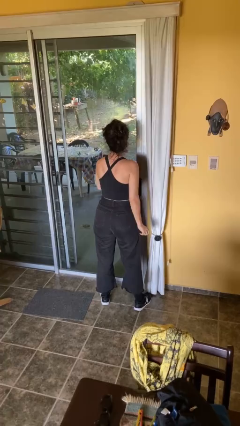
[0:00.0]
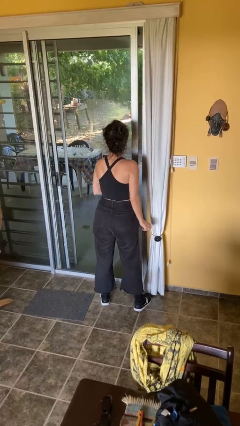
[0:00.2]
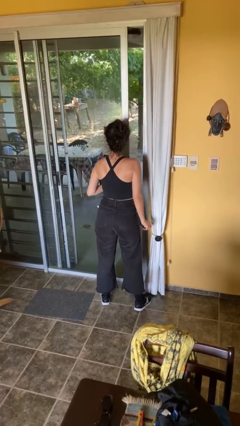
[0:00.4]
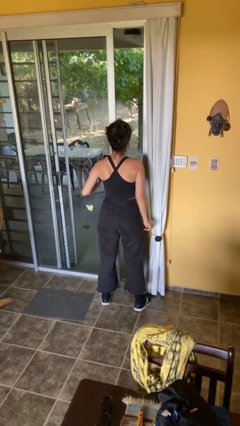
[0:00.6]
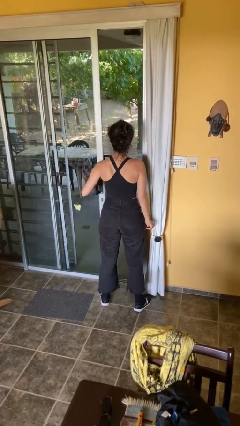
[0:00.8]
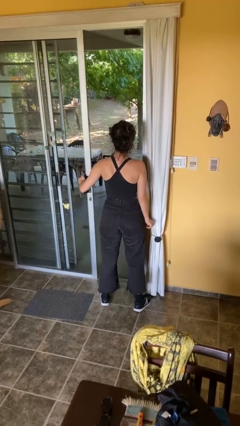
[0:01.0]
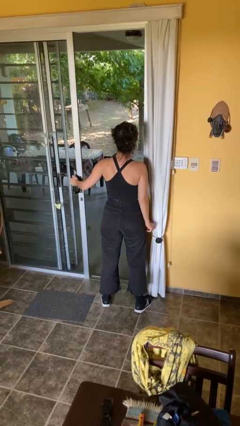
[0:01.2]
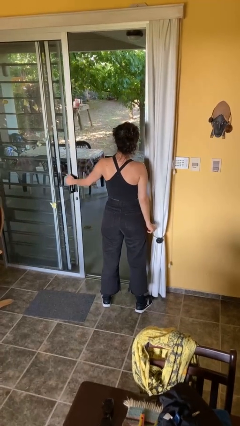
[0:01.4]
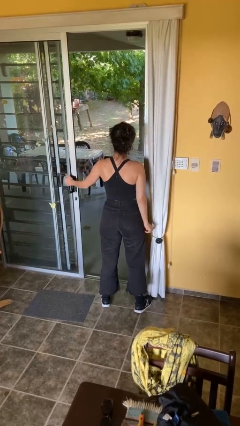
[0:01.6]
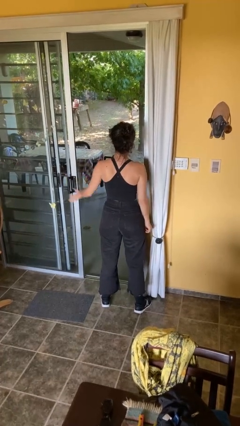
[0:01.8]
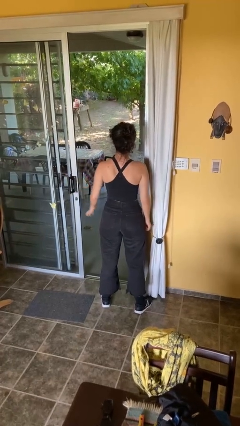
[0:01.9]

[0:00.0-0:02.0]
person opens facility door

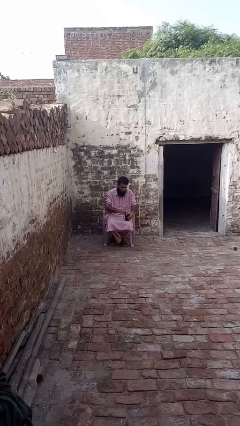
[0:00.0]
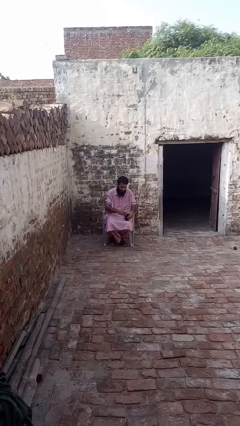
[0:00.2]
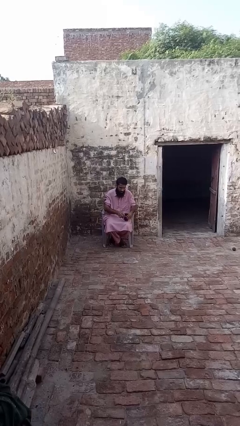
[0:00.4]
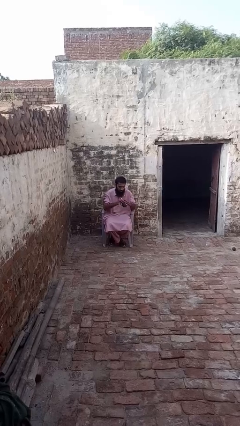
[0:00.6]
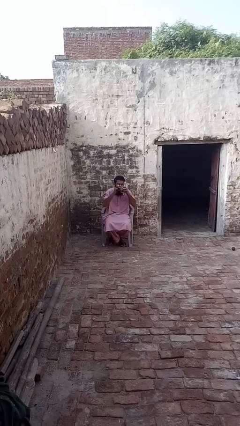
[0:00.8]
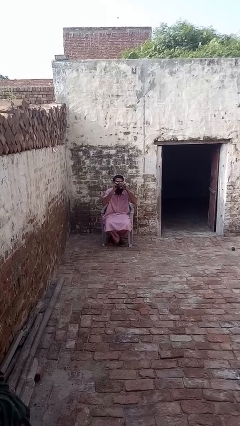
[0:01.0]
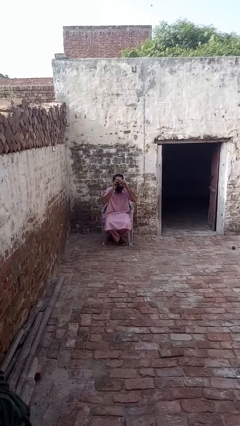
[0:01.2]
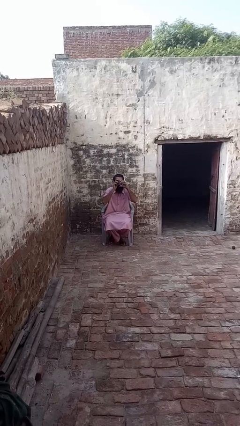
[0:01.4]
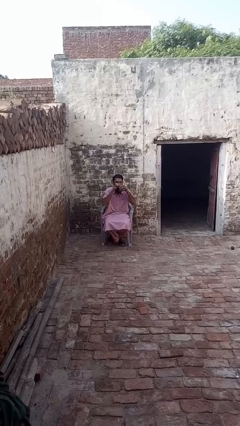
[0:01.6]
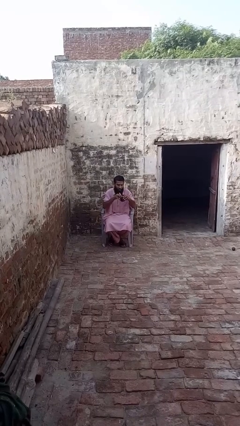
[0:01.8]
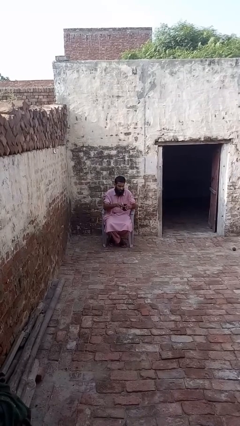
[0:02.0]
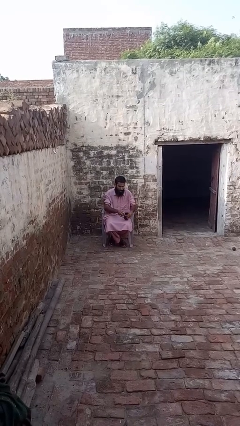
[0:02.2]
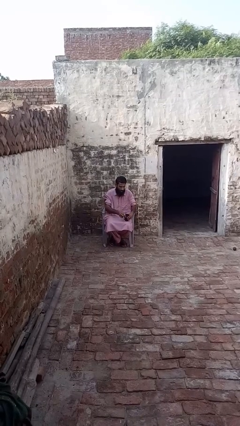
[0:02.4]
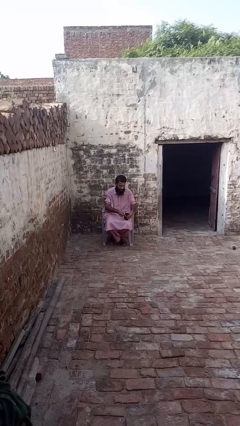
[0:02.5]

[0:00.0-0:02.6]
person drinks from mug

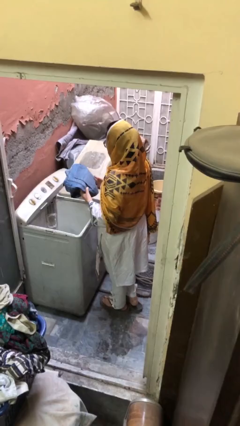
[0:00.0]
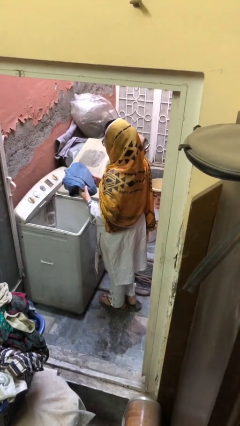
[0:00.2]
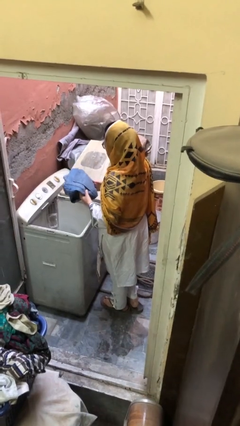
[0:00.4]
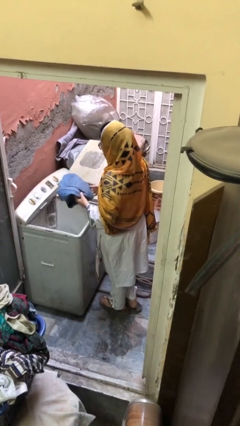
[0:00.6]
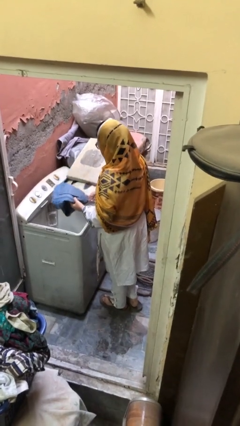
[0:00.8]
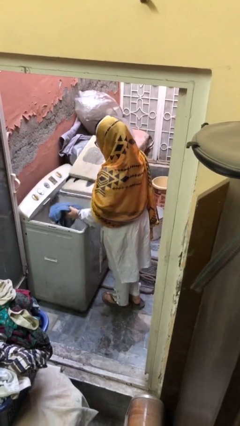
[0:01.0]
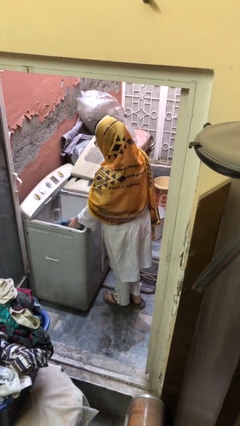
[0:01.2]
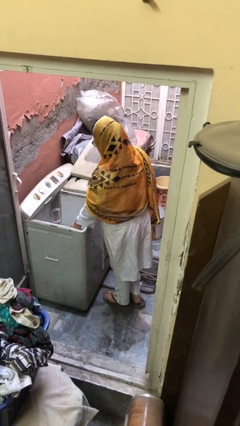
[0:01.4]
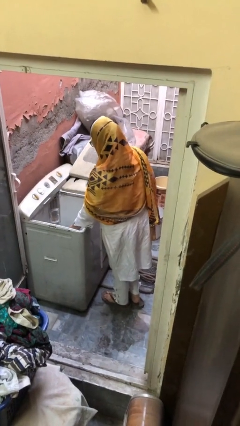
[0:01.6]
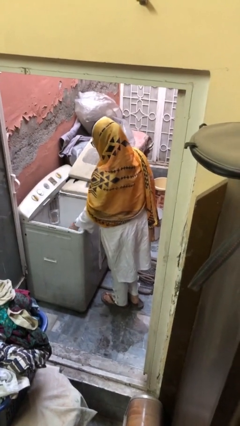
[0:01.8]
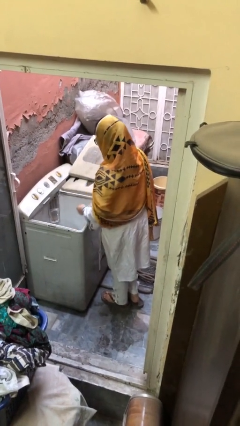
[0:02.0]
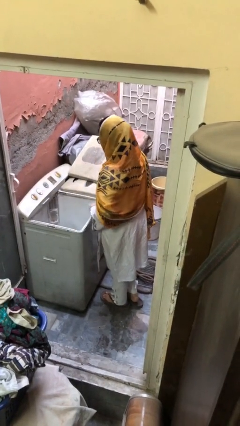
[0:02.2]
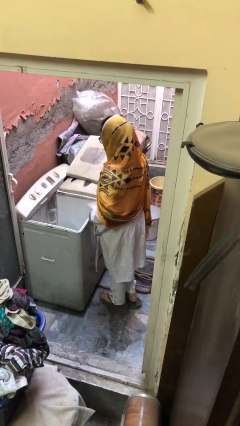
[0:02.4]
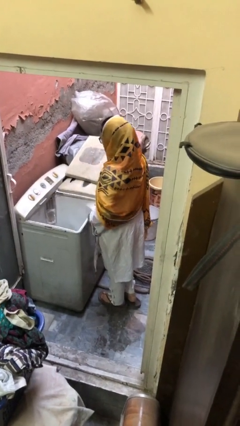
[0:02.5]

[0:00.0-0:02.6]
person loads clotheswasher

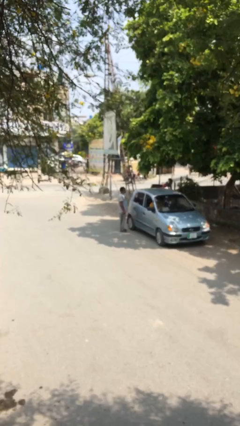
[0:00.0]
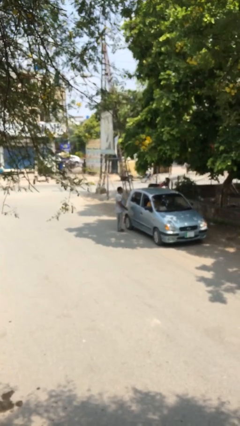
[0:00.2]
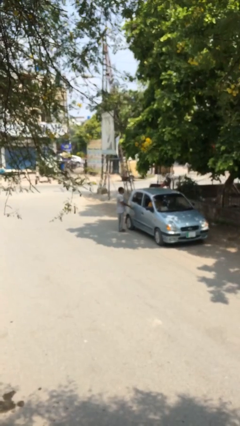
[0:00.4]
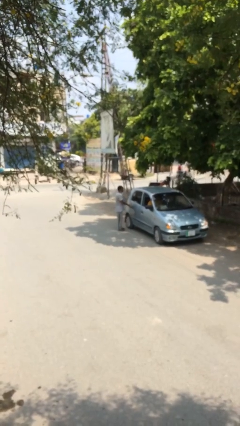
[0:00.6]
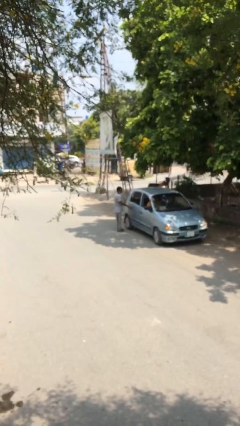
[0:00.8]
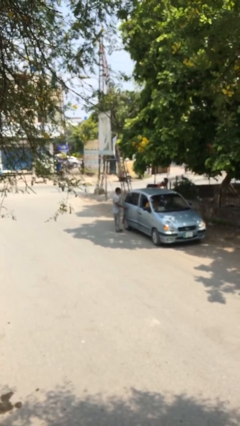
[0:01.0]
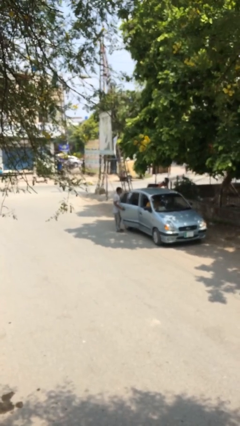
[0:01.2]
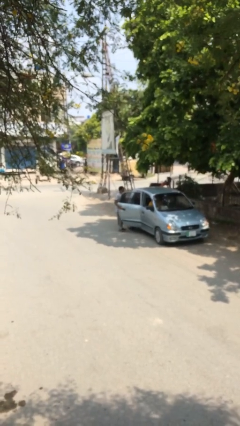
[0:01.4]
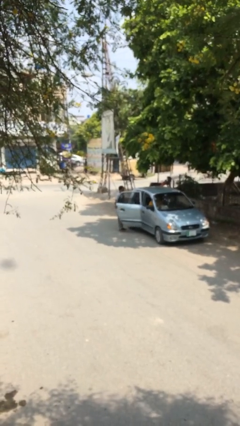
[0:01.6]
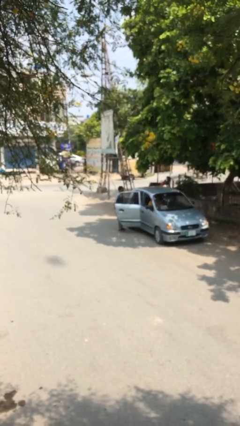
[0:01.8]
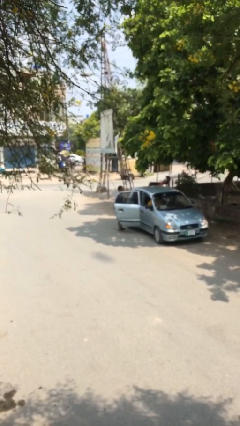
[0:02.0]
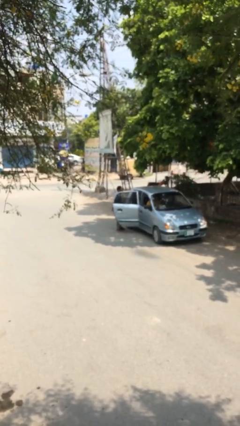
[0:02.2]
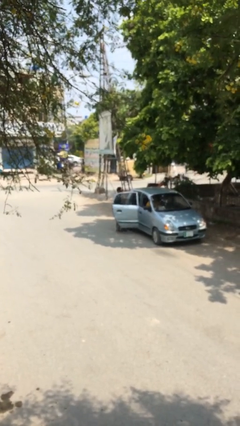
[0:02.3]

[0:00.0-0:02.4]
person opens car door

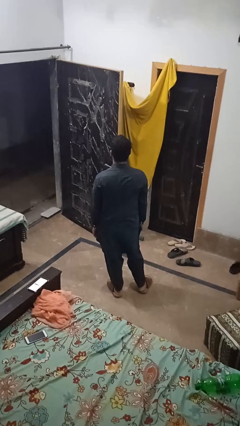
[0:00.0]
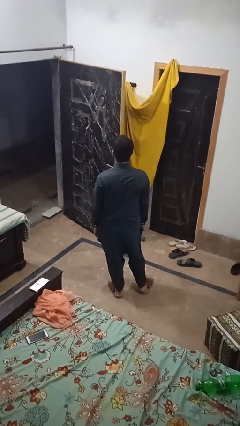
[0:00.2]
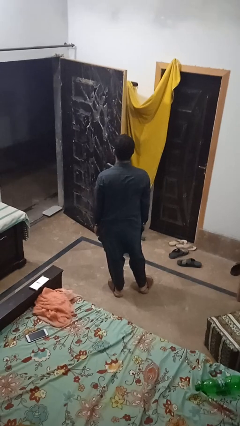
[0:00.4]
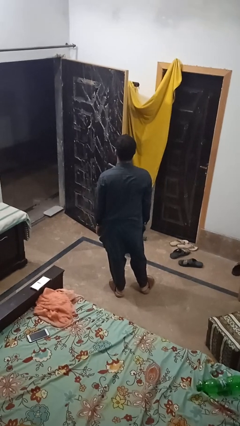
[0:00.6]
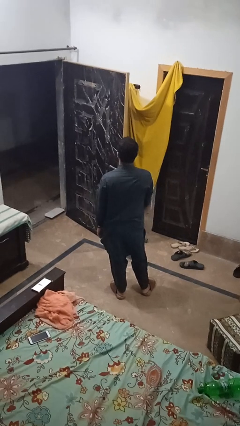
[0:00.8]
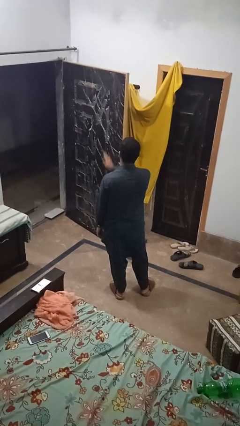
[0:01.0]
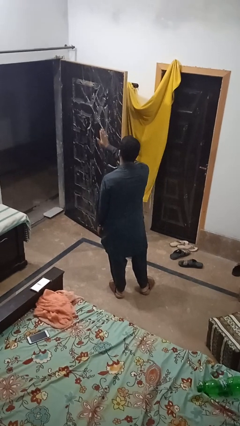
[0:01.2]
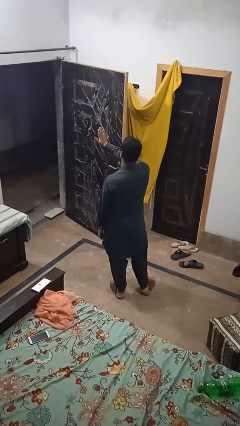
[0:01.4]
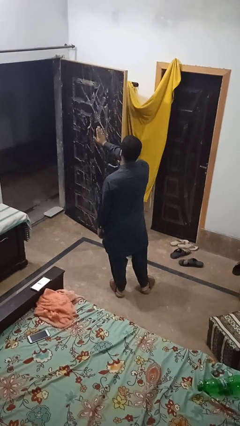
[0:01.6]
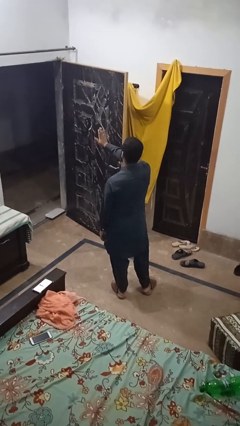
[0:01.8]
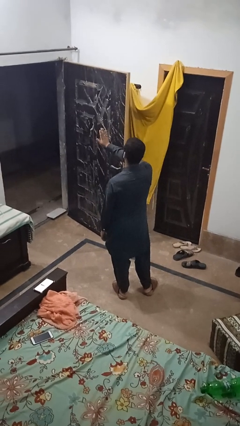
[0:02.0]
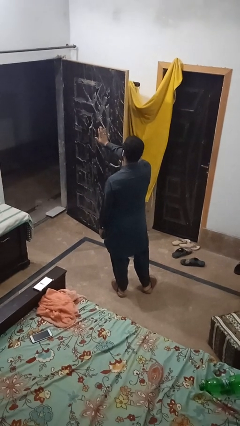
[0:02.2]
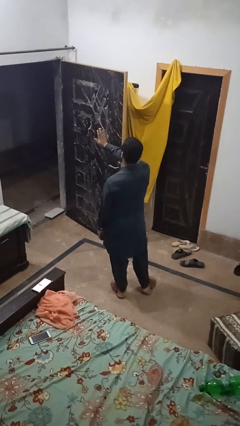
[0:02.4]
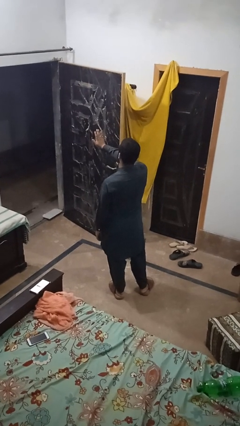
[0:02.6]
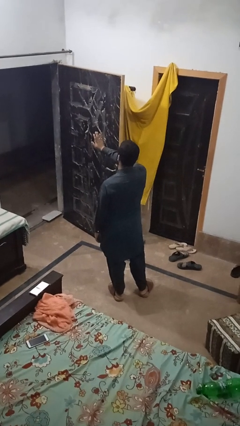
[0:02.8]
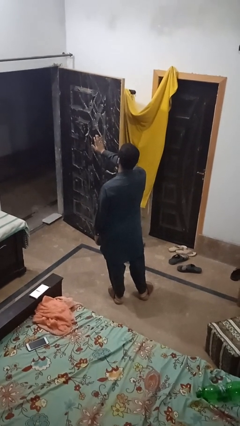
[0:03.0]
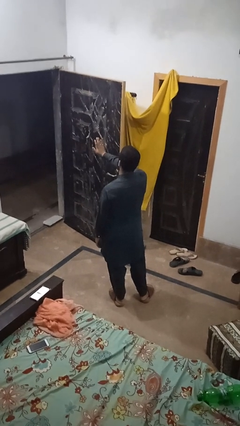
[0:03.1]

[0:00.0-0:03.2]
person gestures stop

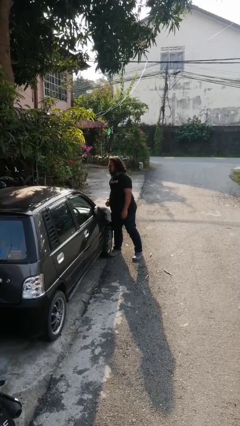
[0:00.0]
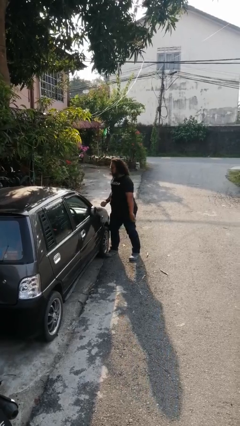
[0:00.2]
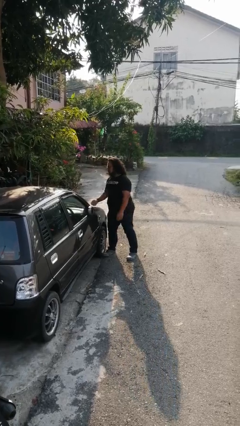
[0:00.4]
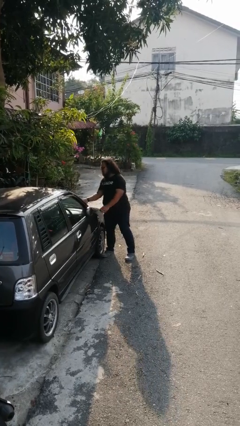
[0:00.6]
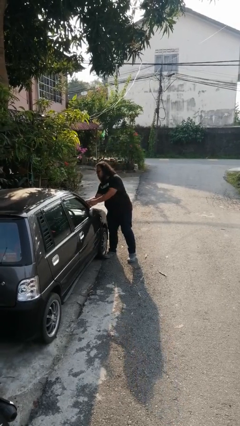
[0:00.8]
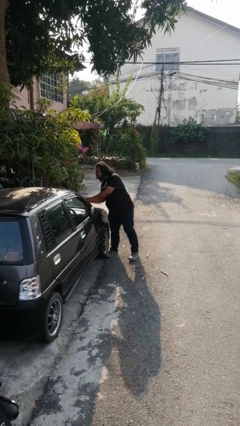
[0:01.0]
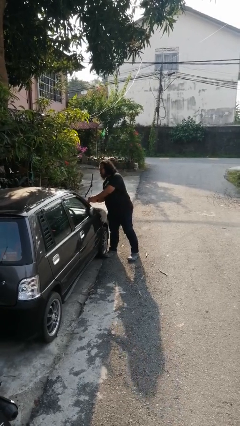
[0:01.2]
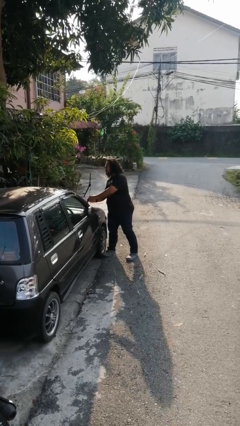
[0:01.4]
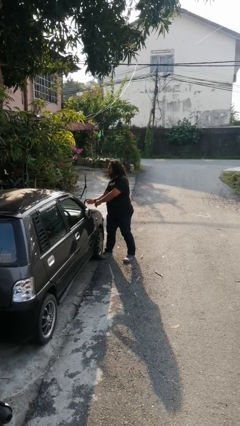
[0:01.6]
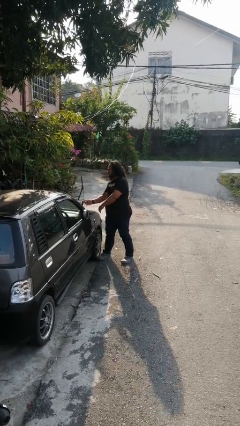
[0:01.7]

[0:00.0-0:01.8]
person flips up car wipers

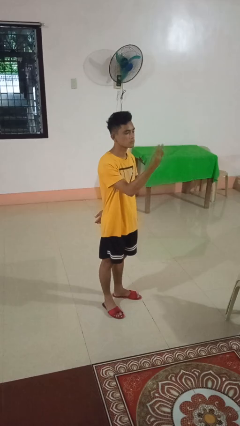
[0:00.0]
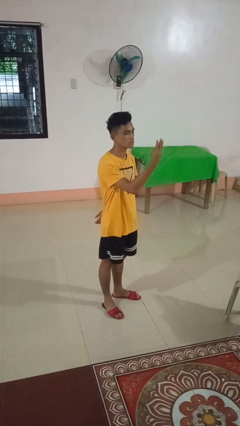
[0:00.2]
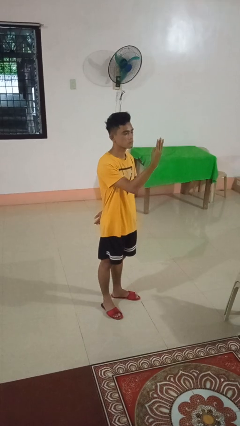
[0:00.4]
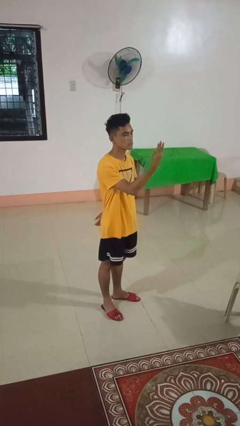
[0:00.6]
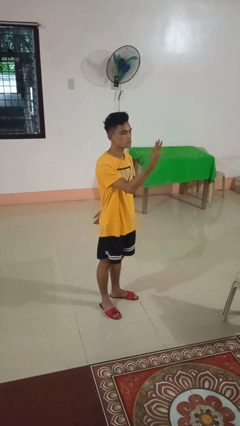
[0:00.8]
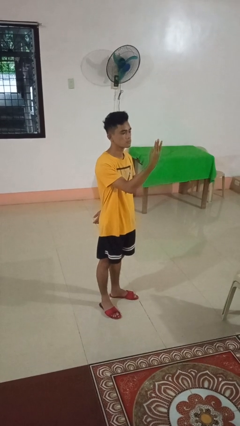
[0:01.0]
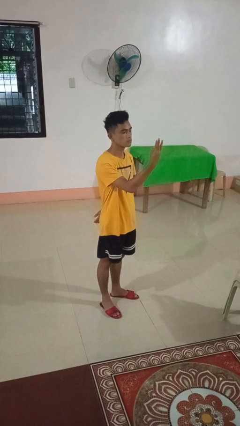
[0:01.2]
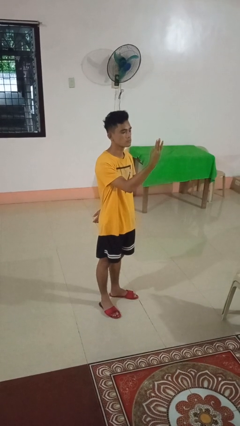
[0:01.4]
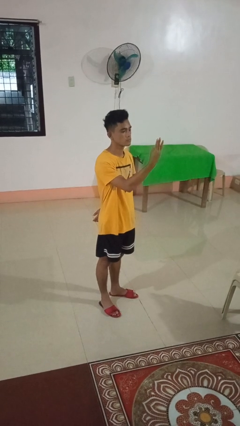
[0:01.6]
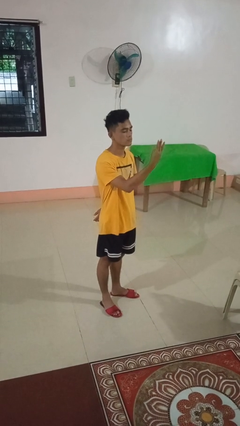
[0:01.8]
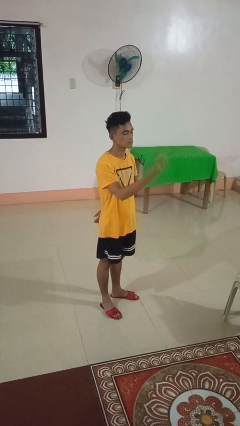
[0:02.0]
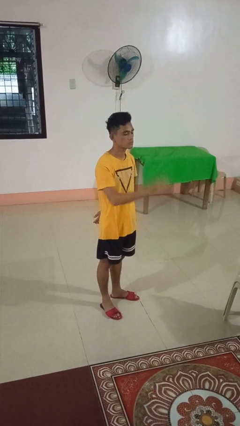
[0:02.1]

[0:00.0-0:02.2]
person gestures number three

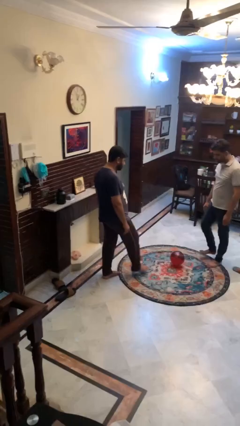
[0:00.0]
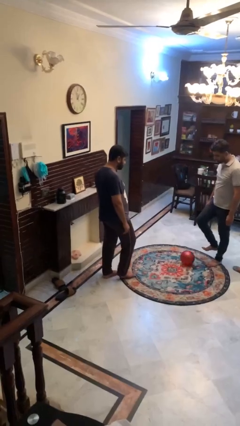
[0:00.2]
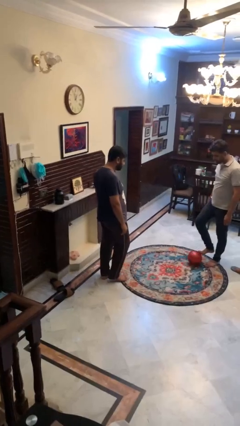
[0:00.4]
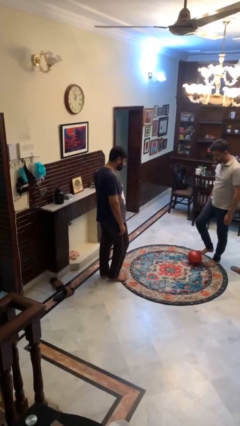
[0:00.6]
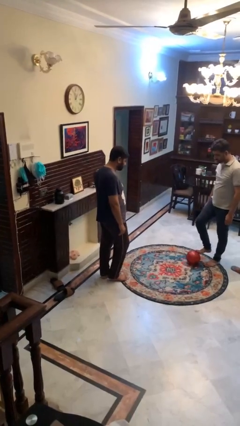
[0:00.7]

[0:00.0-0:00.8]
person kicks object to person
